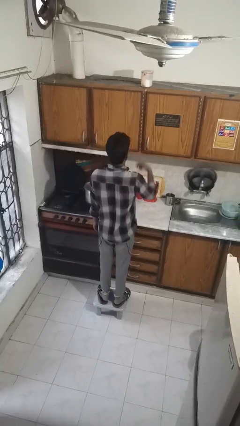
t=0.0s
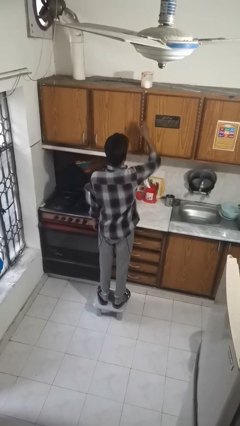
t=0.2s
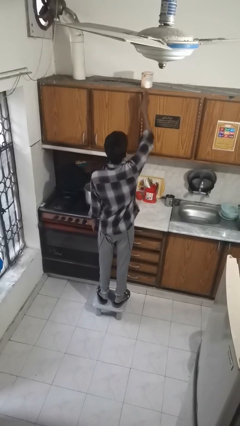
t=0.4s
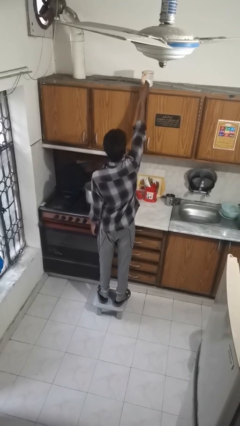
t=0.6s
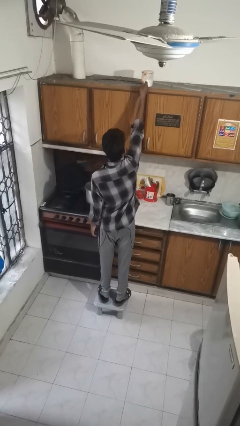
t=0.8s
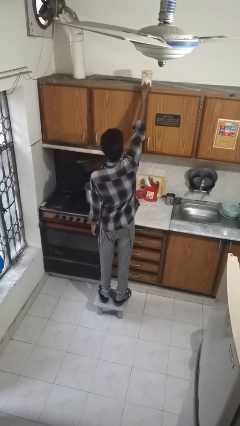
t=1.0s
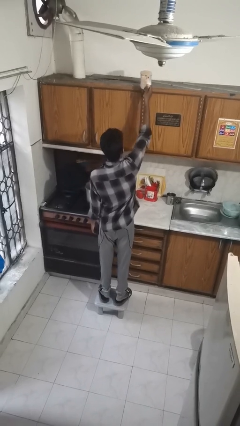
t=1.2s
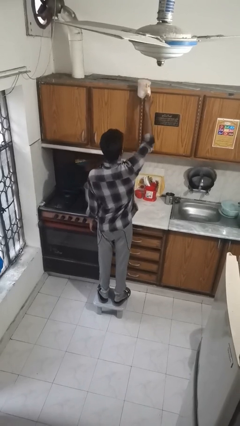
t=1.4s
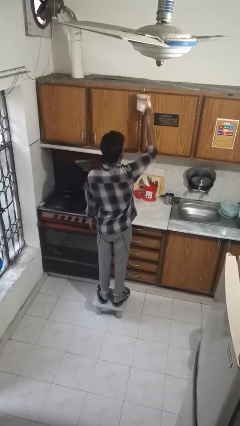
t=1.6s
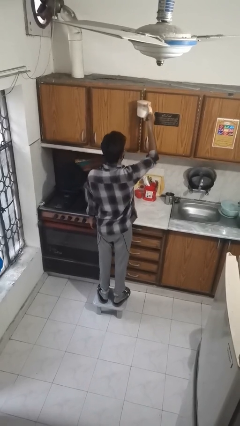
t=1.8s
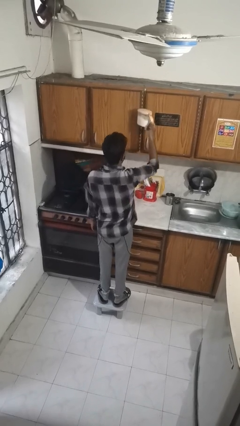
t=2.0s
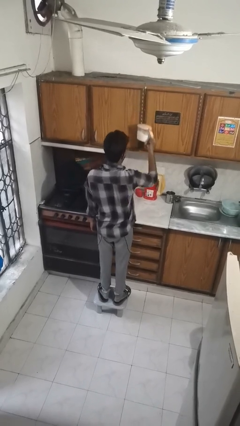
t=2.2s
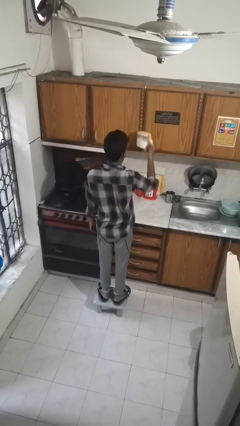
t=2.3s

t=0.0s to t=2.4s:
person picks up object from shelf

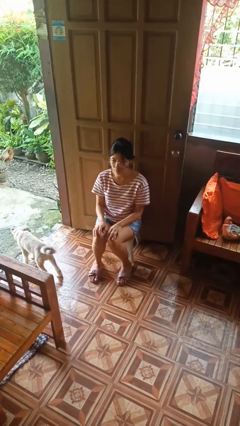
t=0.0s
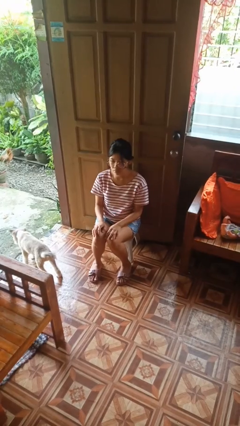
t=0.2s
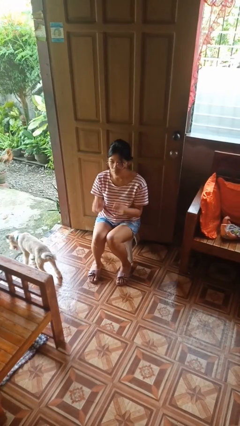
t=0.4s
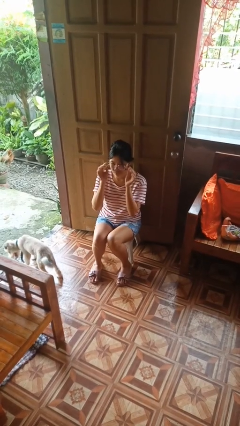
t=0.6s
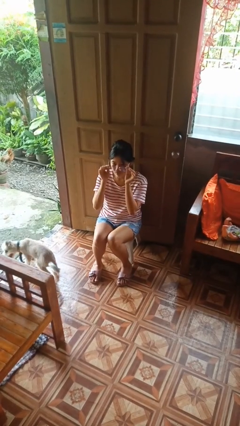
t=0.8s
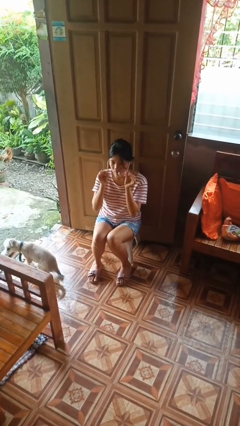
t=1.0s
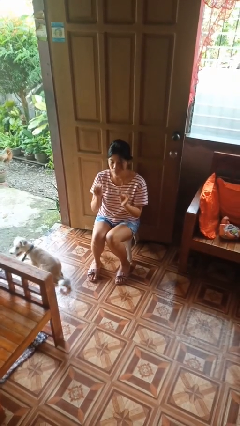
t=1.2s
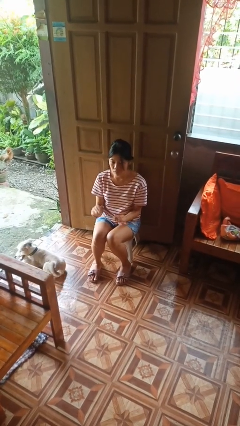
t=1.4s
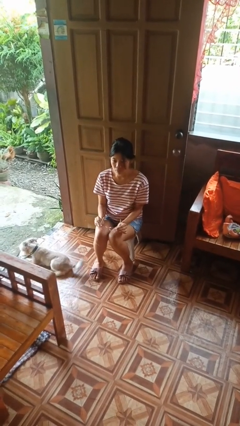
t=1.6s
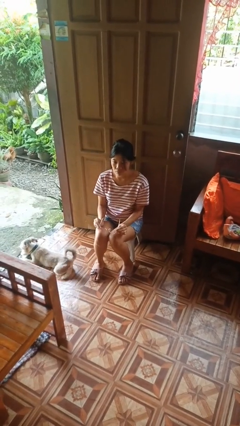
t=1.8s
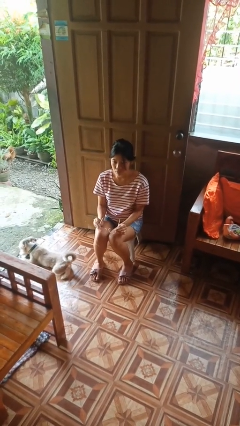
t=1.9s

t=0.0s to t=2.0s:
person takes off glasses

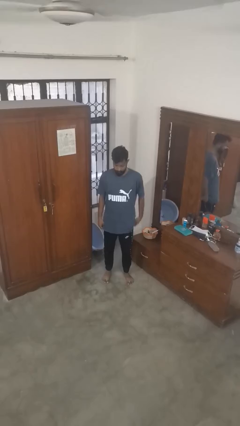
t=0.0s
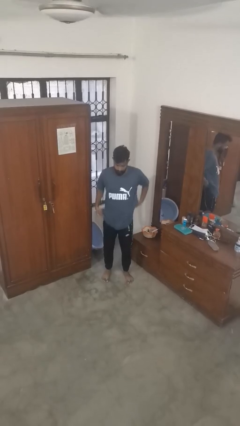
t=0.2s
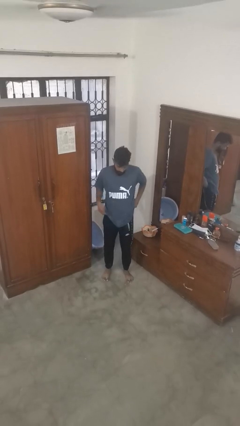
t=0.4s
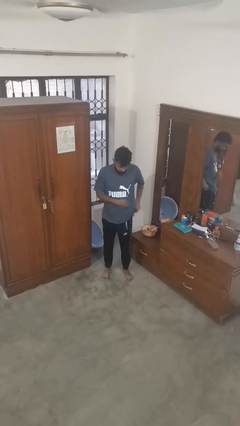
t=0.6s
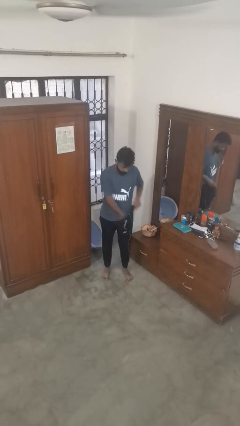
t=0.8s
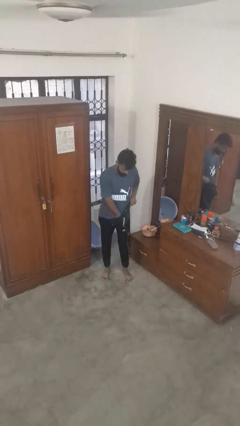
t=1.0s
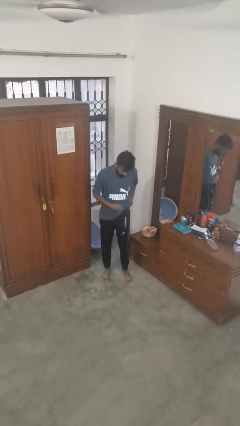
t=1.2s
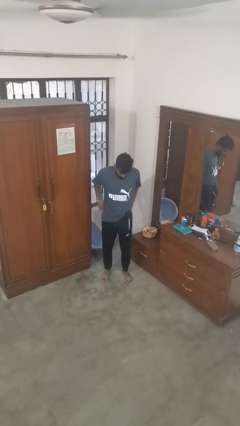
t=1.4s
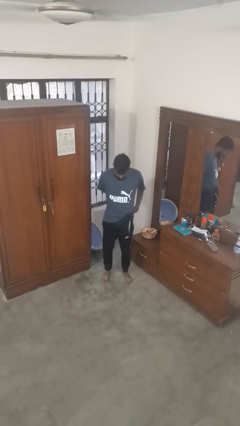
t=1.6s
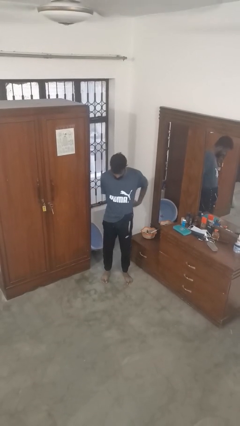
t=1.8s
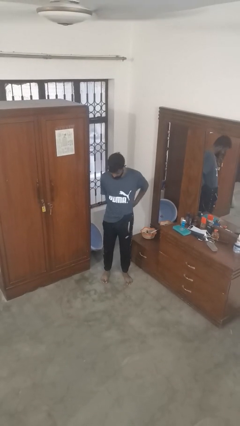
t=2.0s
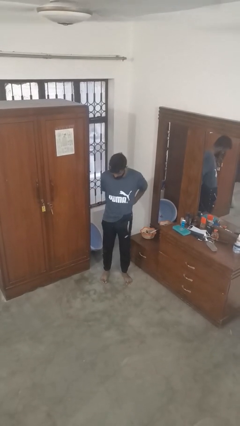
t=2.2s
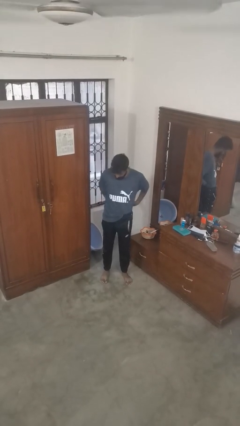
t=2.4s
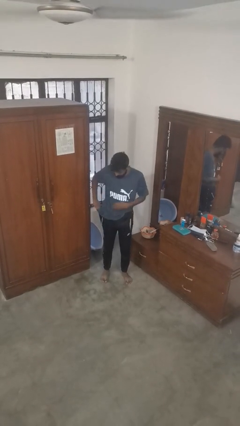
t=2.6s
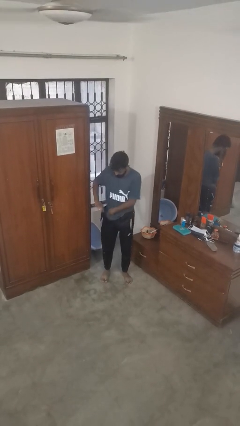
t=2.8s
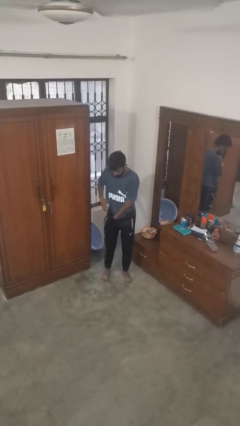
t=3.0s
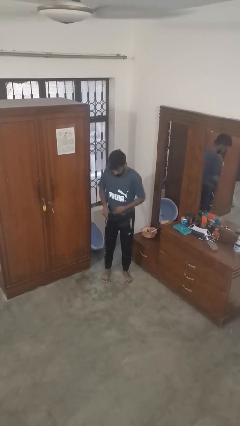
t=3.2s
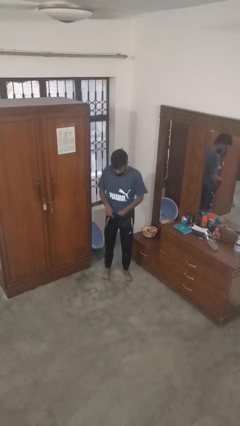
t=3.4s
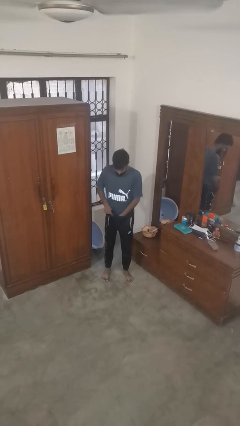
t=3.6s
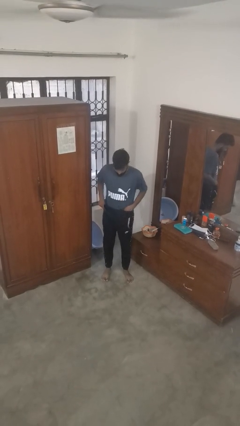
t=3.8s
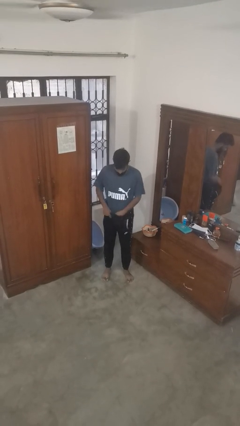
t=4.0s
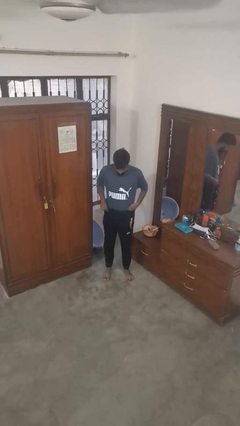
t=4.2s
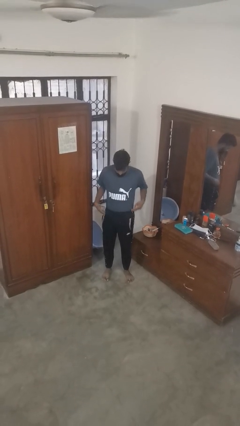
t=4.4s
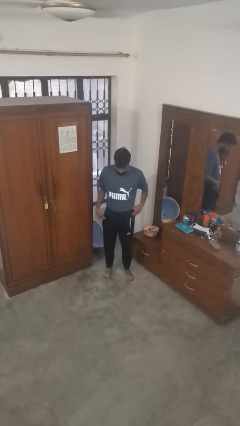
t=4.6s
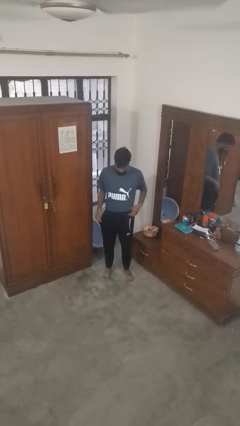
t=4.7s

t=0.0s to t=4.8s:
person tucks in shirt

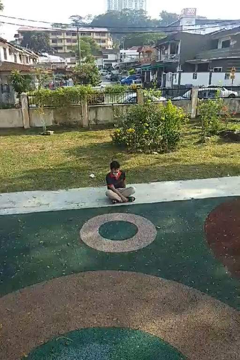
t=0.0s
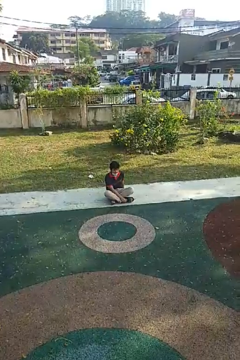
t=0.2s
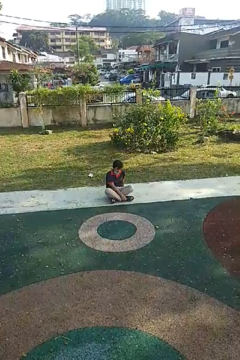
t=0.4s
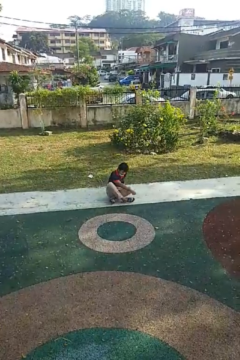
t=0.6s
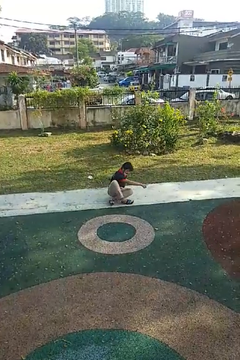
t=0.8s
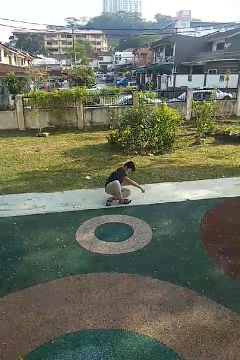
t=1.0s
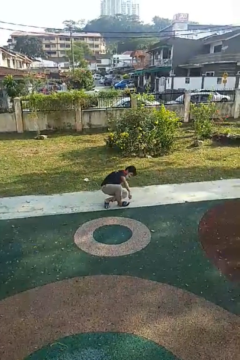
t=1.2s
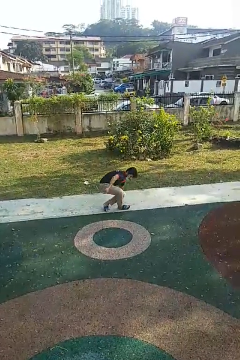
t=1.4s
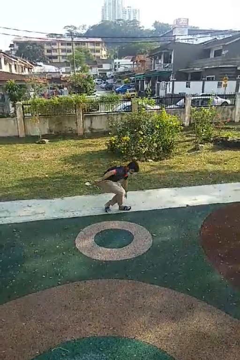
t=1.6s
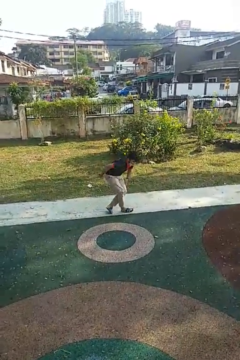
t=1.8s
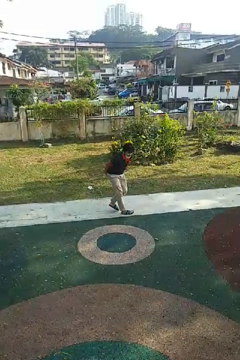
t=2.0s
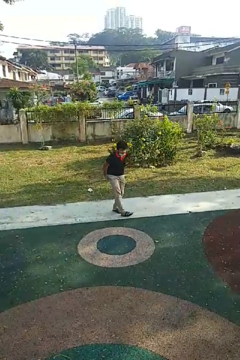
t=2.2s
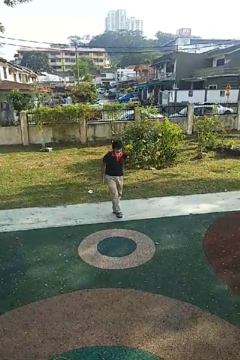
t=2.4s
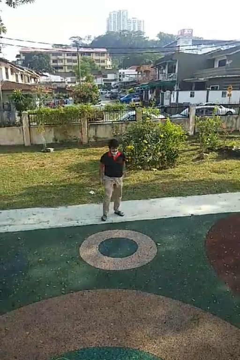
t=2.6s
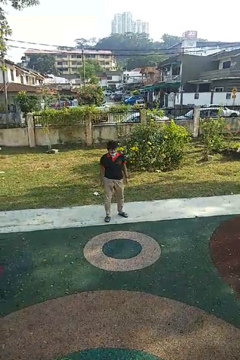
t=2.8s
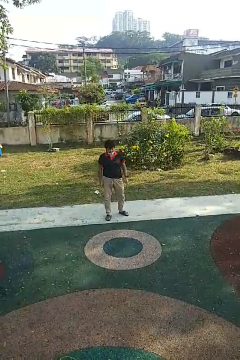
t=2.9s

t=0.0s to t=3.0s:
person stands up from floor

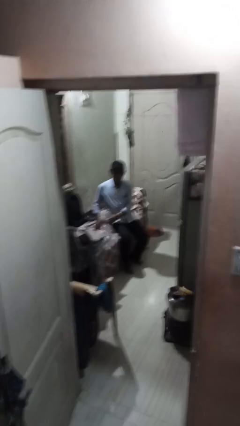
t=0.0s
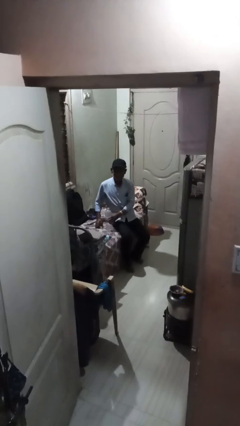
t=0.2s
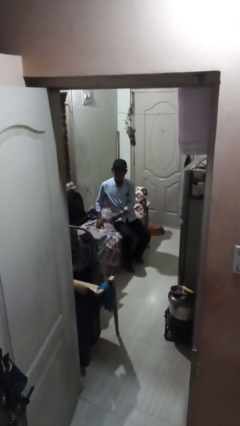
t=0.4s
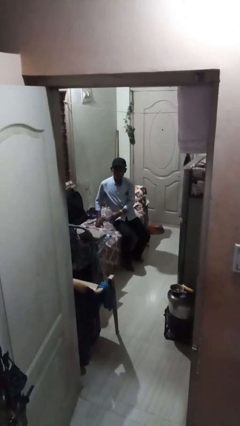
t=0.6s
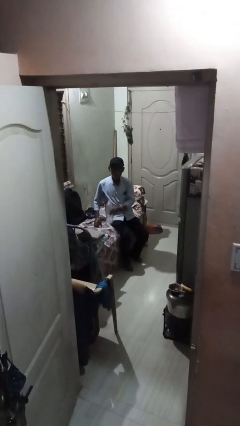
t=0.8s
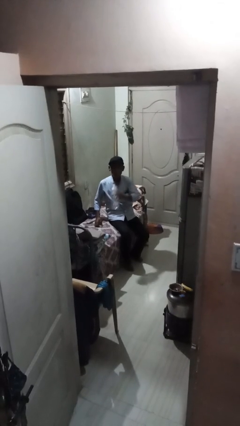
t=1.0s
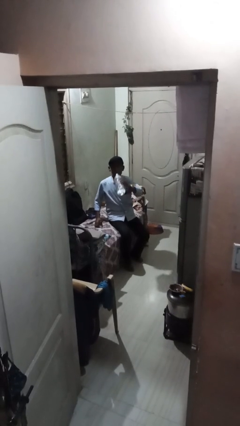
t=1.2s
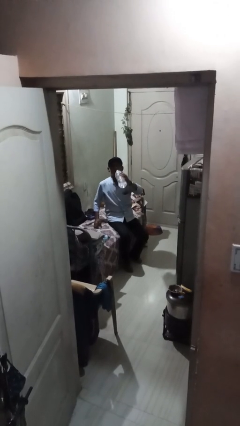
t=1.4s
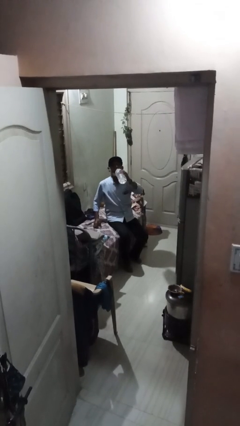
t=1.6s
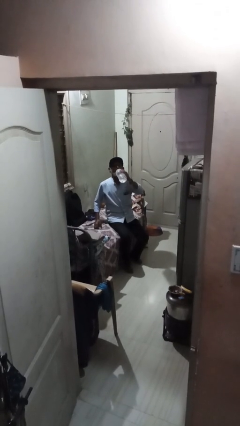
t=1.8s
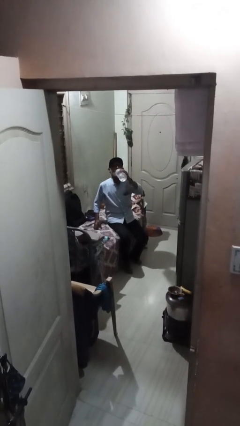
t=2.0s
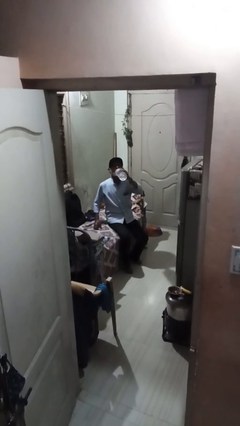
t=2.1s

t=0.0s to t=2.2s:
person drinks from bottle

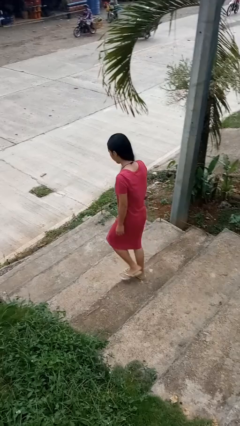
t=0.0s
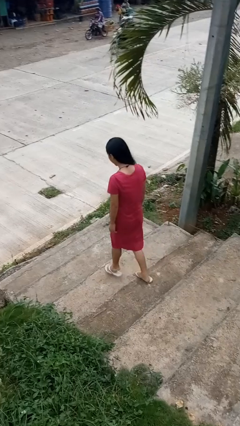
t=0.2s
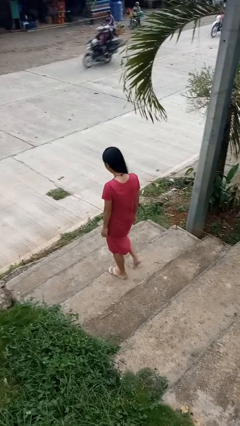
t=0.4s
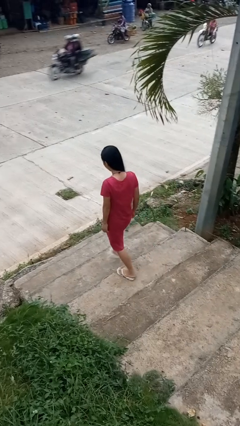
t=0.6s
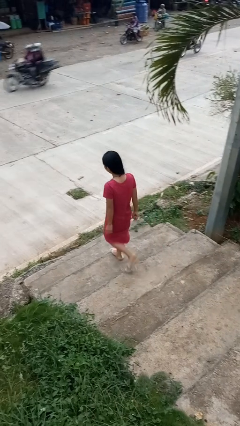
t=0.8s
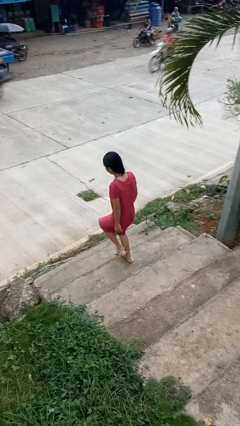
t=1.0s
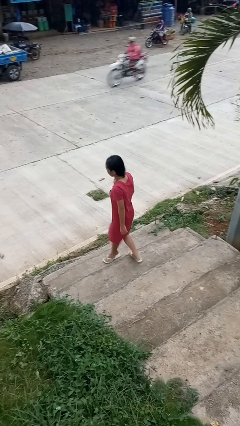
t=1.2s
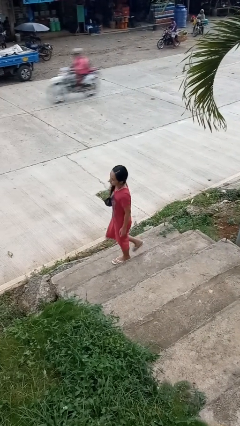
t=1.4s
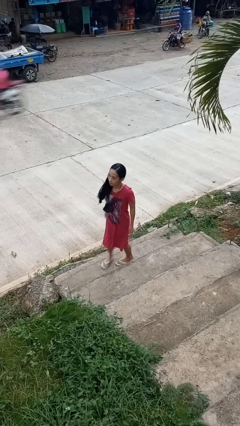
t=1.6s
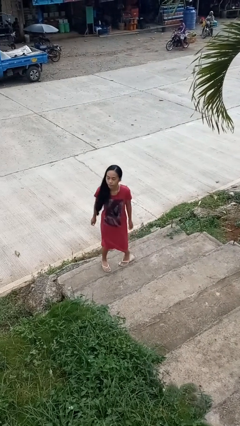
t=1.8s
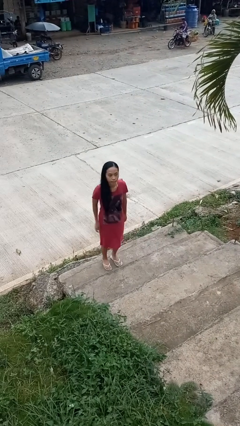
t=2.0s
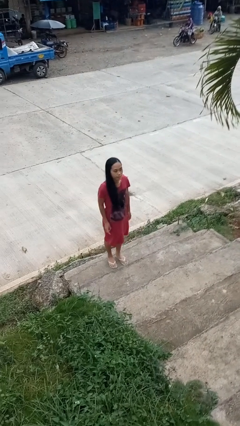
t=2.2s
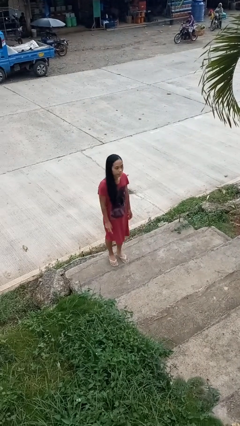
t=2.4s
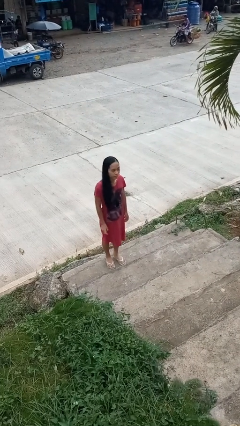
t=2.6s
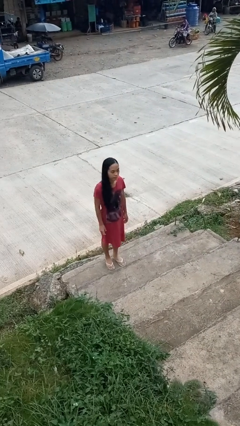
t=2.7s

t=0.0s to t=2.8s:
person climbs down stairs
